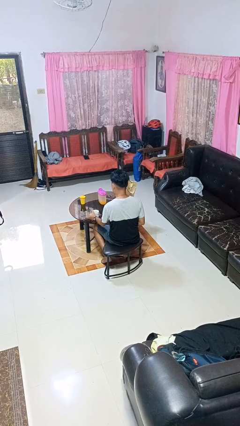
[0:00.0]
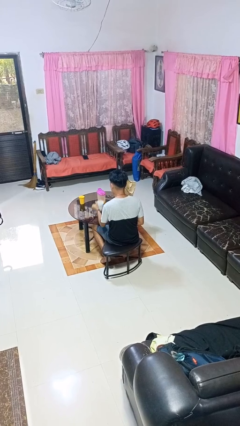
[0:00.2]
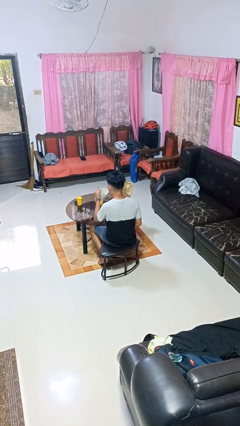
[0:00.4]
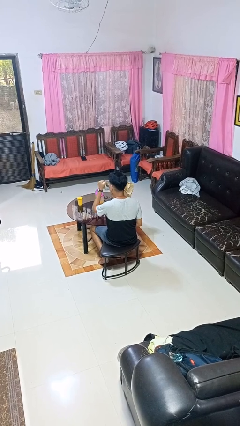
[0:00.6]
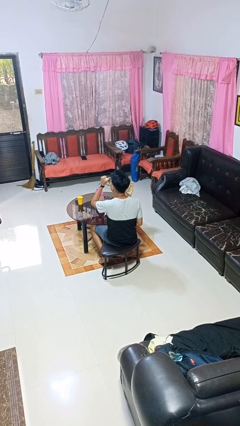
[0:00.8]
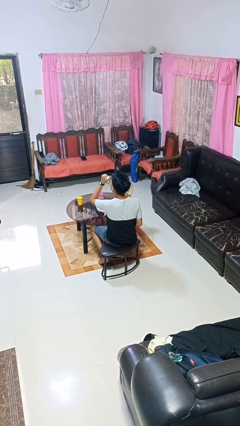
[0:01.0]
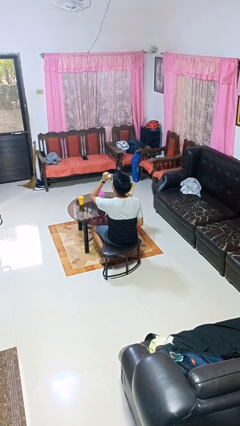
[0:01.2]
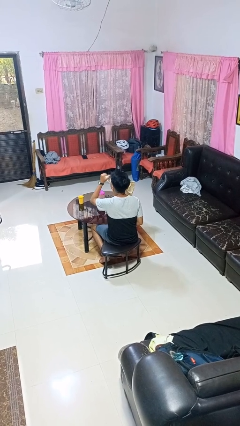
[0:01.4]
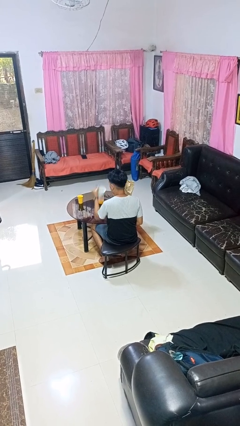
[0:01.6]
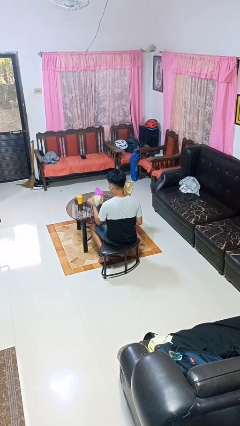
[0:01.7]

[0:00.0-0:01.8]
person drinks from mug

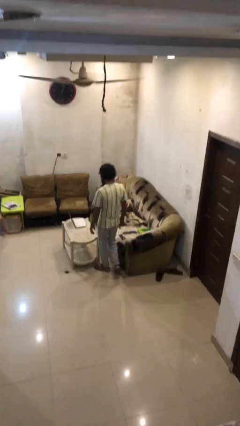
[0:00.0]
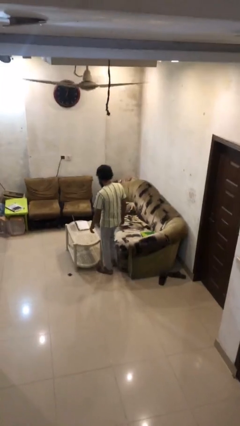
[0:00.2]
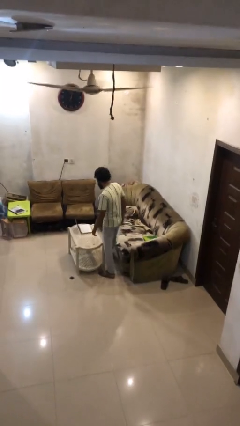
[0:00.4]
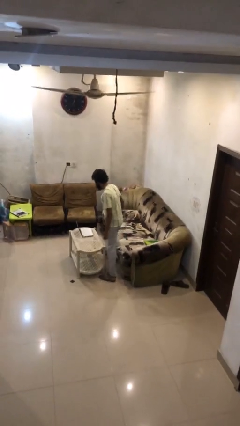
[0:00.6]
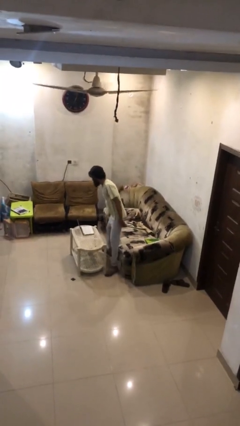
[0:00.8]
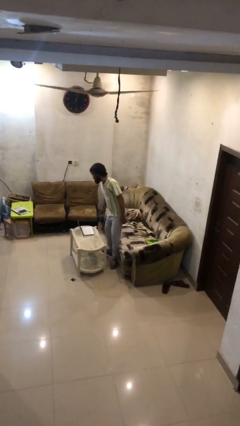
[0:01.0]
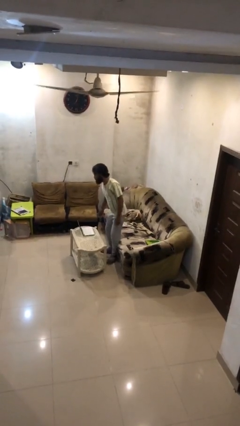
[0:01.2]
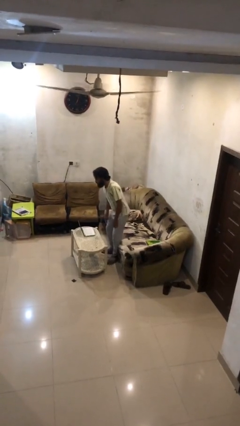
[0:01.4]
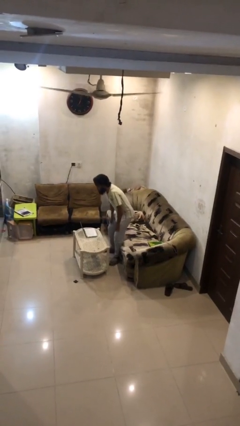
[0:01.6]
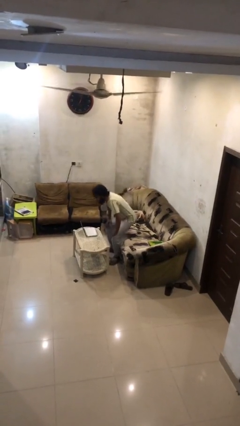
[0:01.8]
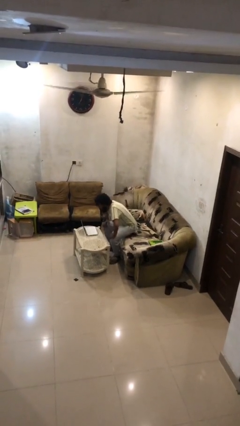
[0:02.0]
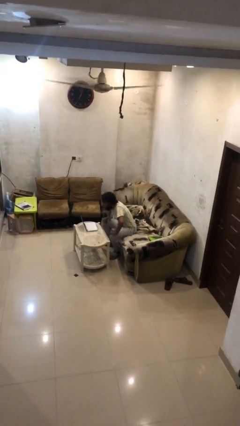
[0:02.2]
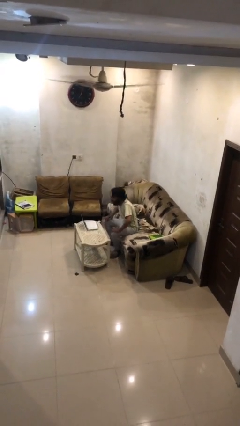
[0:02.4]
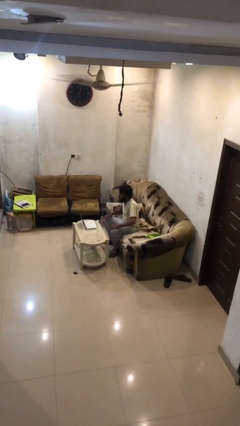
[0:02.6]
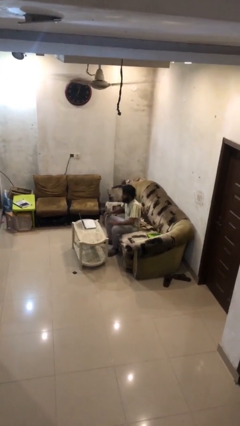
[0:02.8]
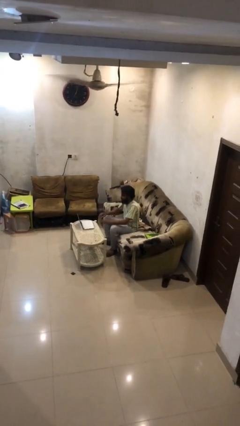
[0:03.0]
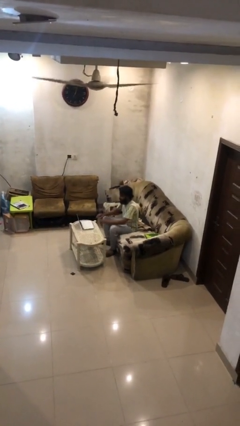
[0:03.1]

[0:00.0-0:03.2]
person sits down

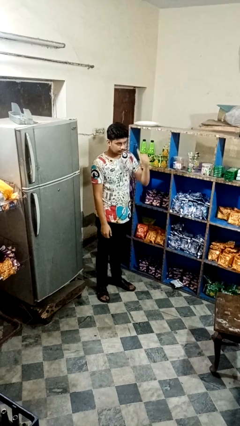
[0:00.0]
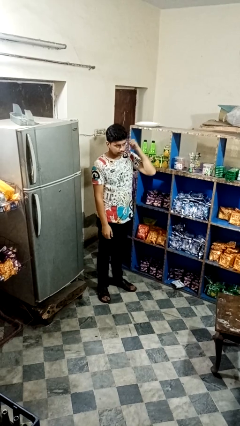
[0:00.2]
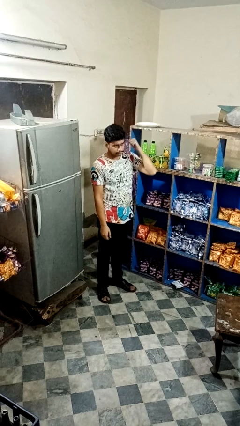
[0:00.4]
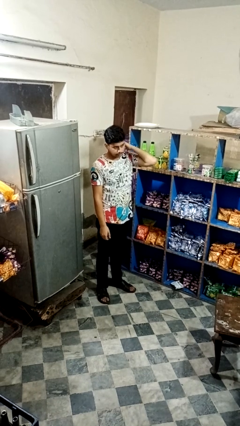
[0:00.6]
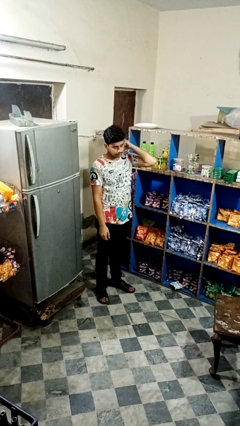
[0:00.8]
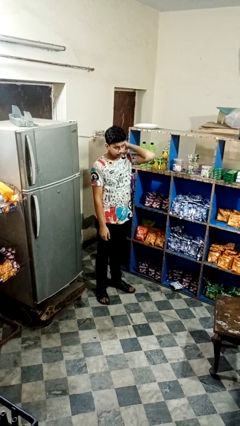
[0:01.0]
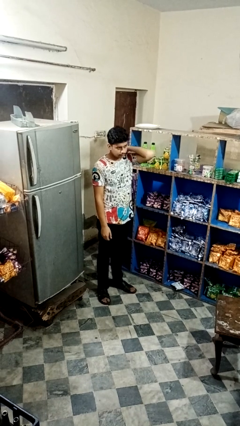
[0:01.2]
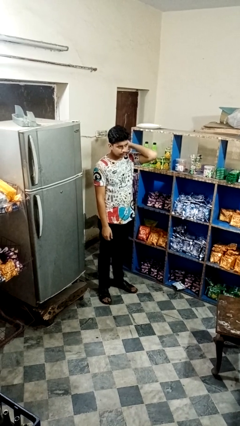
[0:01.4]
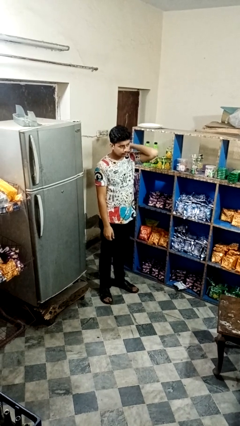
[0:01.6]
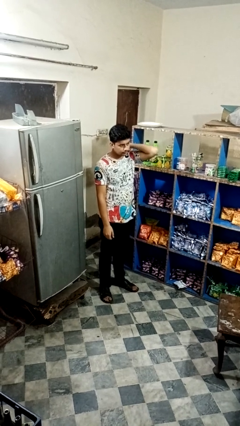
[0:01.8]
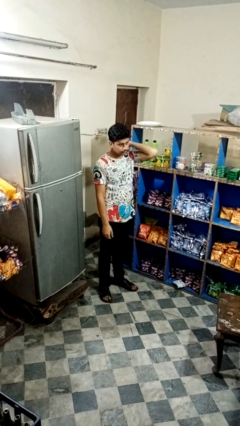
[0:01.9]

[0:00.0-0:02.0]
person gestures behind me

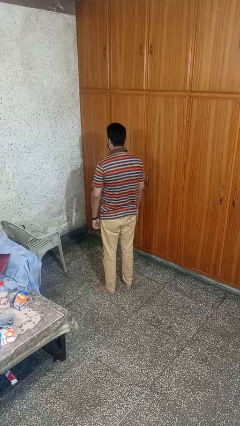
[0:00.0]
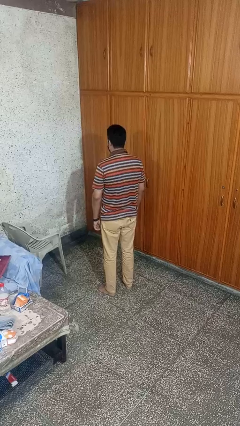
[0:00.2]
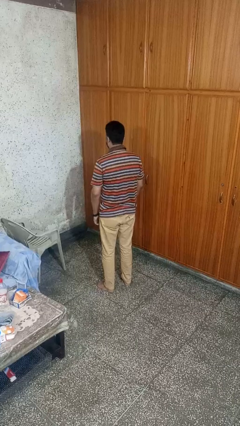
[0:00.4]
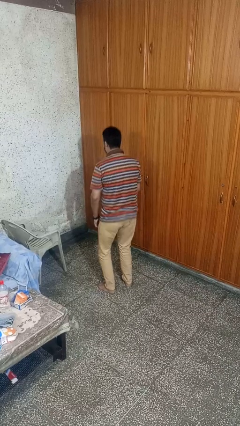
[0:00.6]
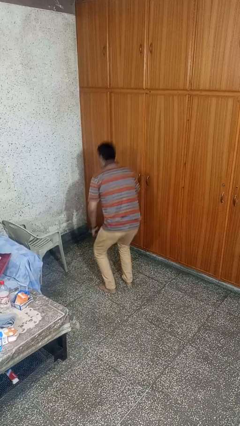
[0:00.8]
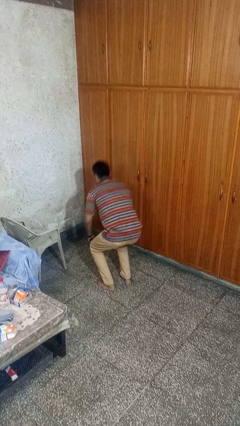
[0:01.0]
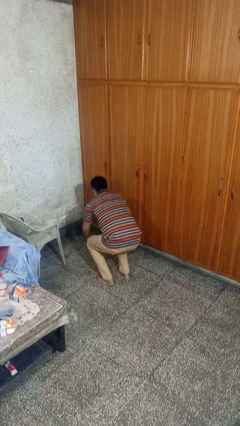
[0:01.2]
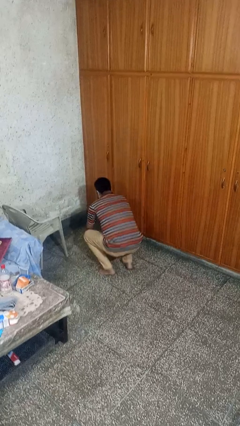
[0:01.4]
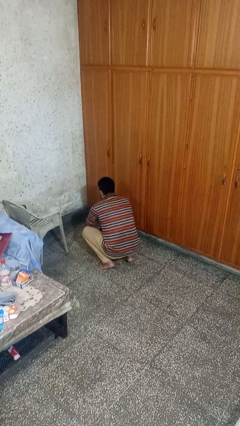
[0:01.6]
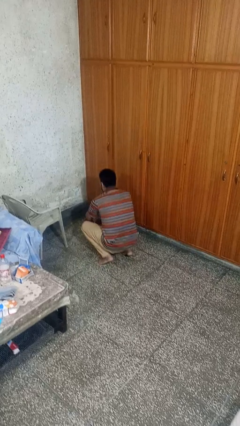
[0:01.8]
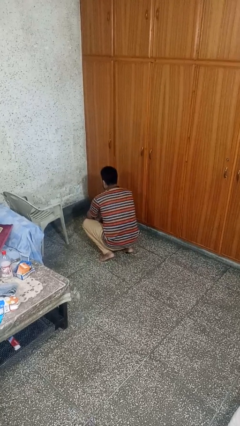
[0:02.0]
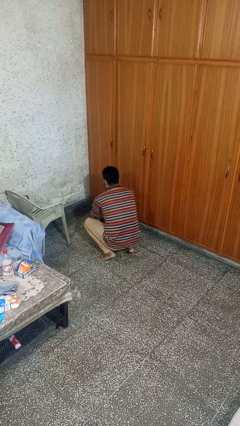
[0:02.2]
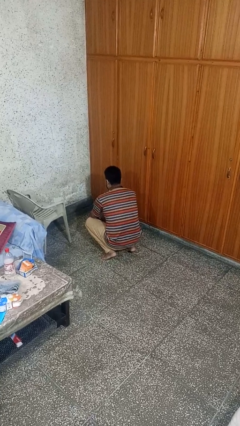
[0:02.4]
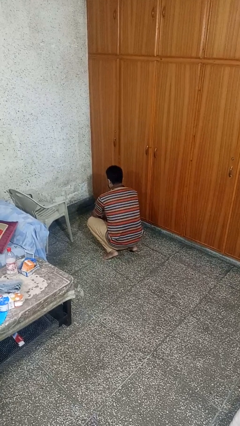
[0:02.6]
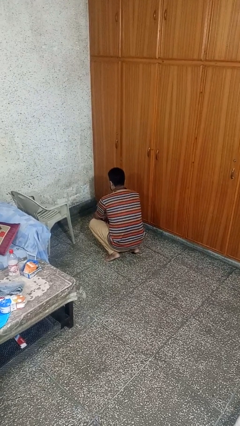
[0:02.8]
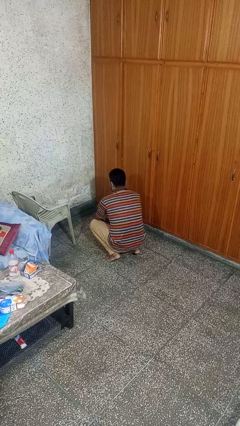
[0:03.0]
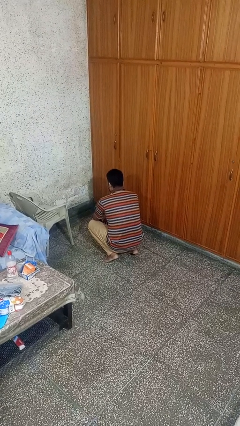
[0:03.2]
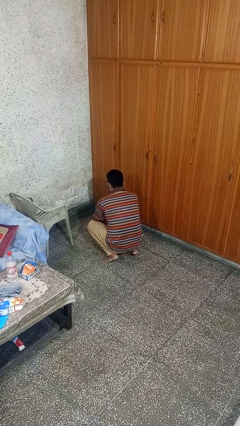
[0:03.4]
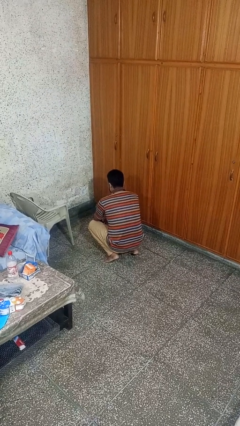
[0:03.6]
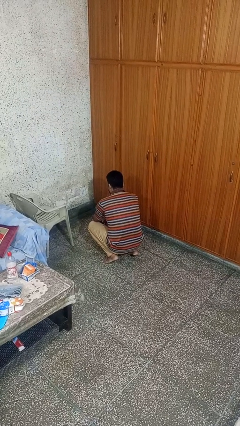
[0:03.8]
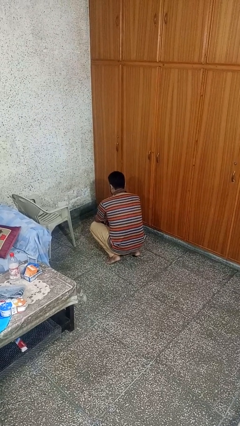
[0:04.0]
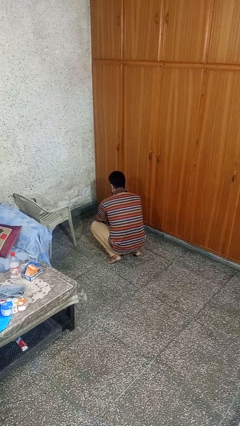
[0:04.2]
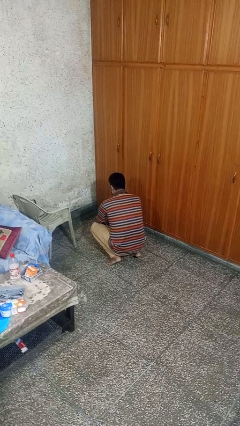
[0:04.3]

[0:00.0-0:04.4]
person squats

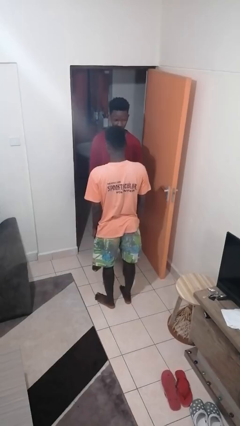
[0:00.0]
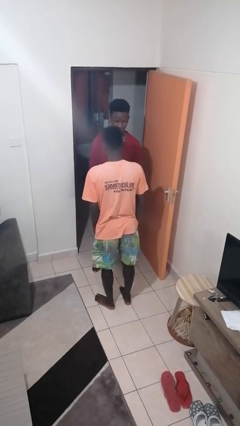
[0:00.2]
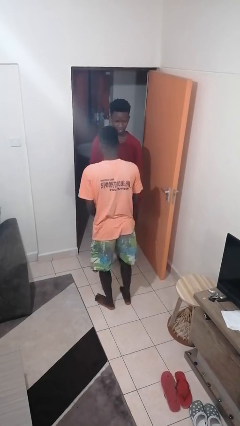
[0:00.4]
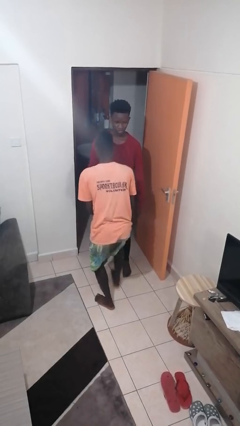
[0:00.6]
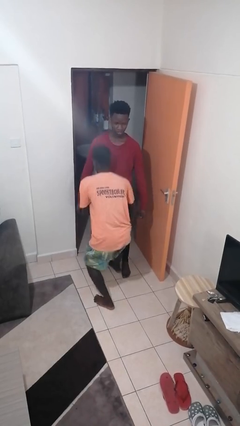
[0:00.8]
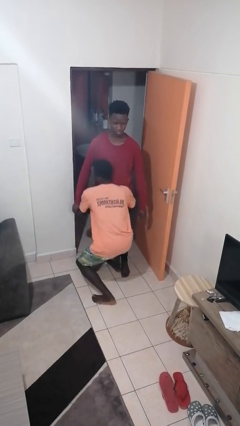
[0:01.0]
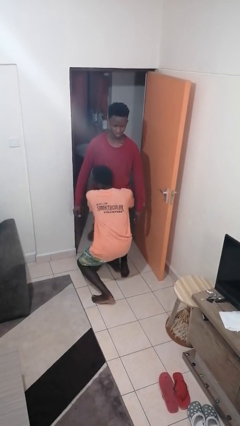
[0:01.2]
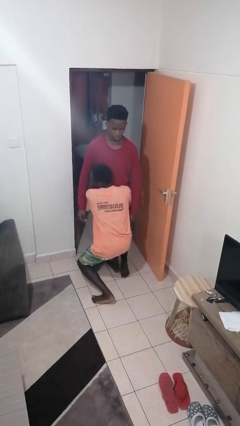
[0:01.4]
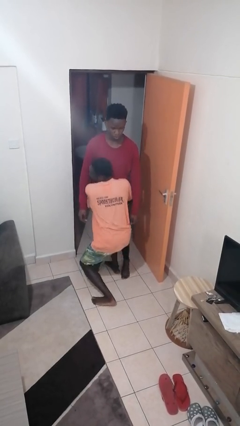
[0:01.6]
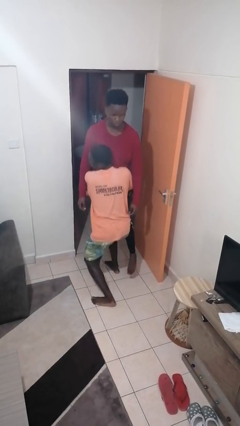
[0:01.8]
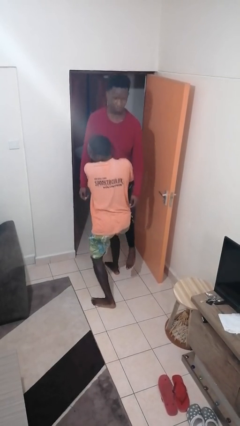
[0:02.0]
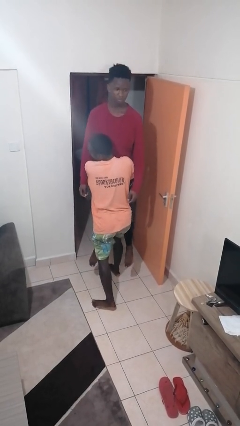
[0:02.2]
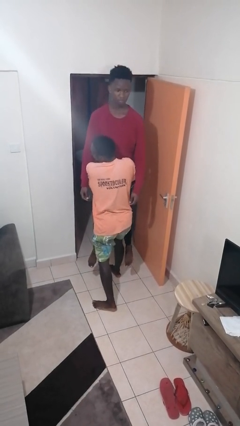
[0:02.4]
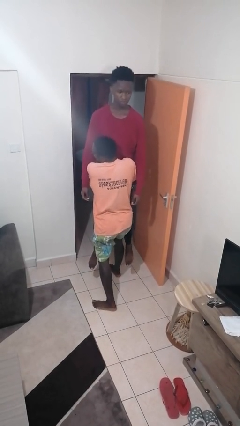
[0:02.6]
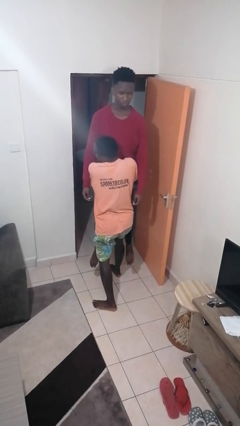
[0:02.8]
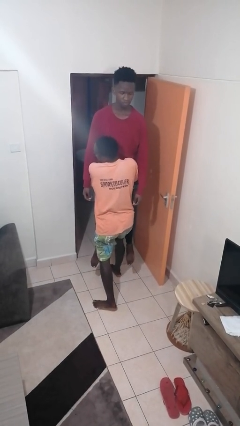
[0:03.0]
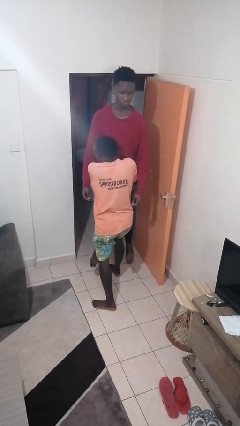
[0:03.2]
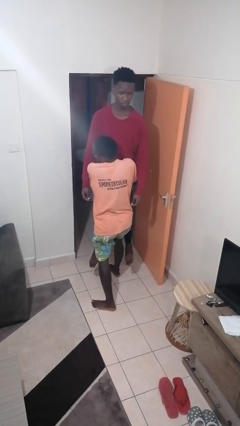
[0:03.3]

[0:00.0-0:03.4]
person picks up person

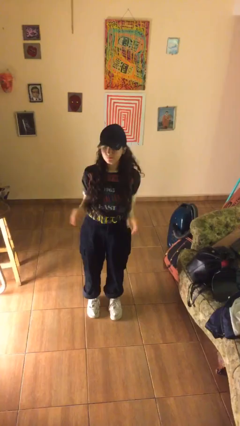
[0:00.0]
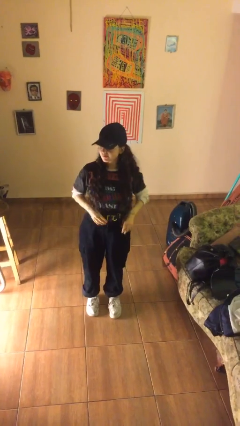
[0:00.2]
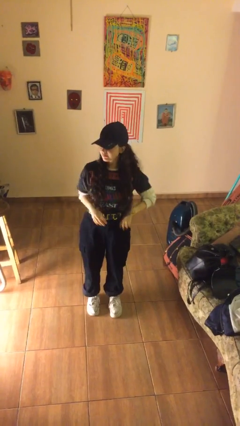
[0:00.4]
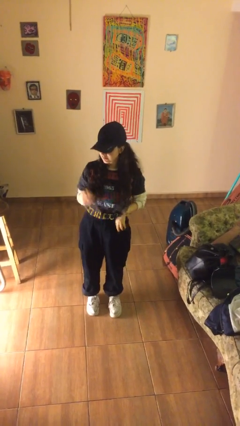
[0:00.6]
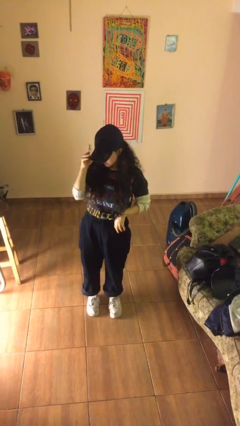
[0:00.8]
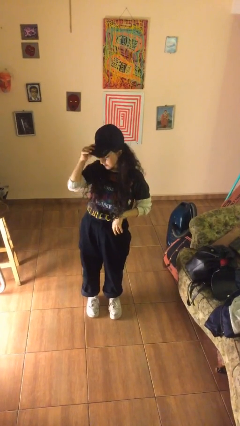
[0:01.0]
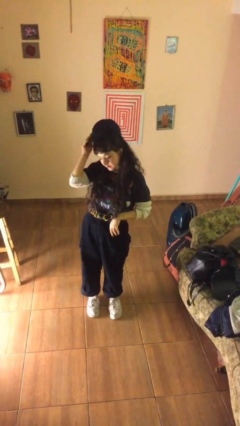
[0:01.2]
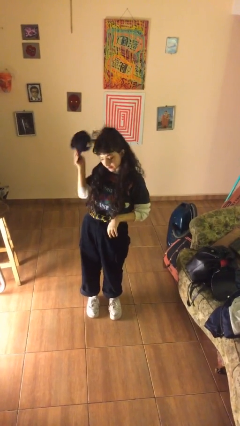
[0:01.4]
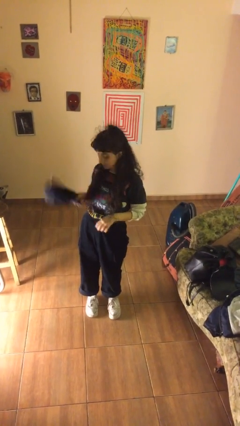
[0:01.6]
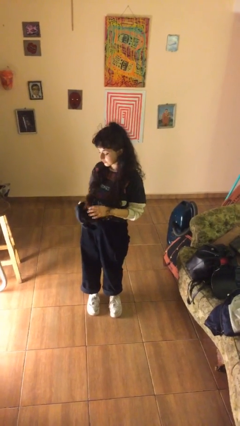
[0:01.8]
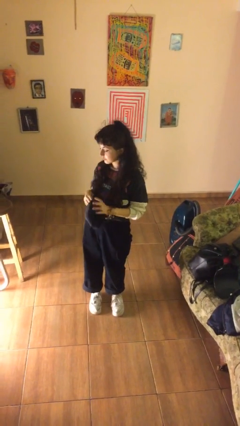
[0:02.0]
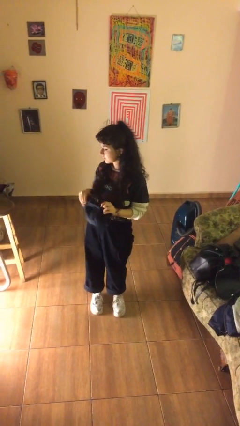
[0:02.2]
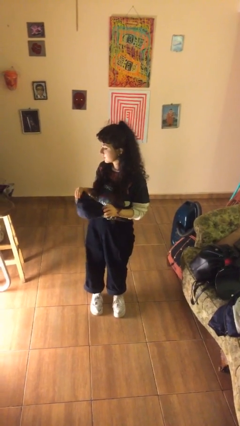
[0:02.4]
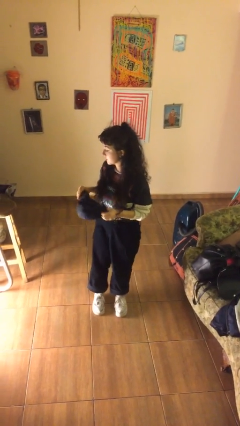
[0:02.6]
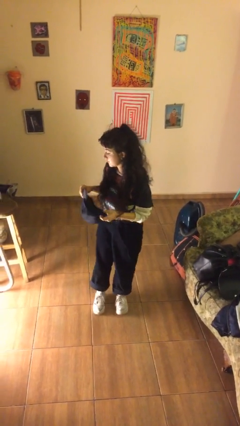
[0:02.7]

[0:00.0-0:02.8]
person takes off hat
